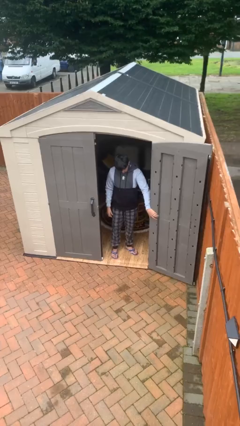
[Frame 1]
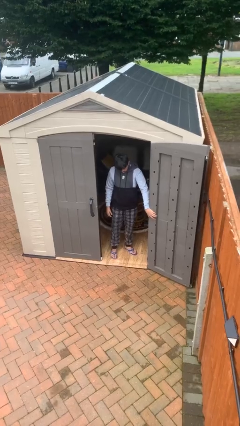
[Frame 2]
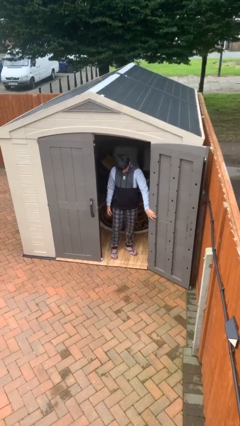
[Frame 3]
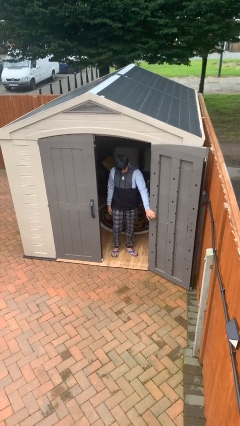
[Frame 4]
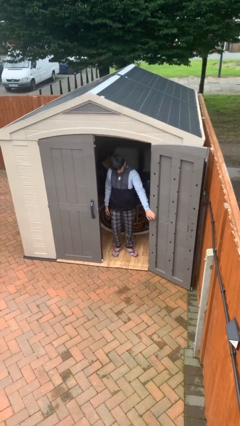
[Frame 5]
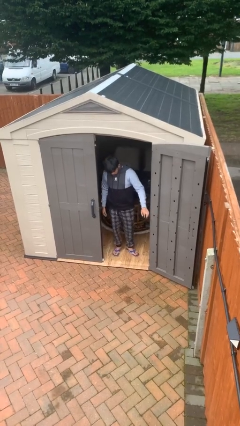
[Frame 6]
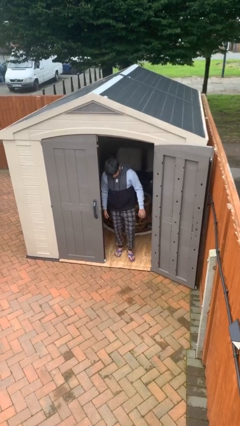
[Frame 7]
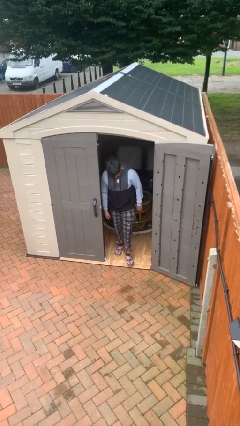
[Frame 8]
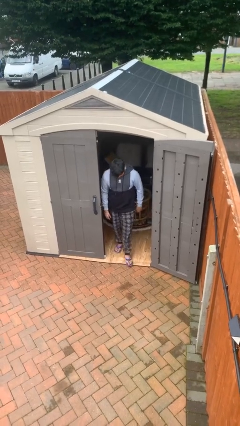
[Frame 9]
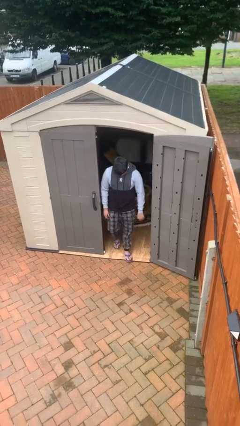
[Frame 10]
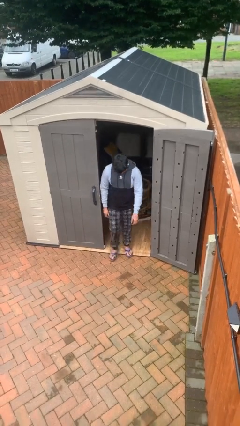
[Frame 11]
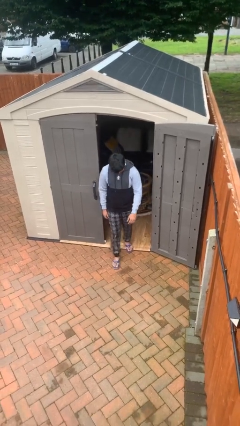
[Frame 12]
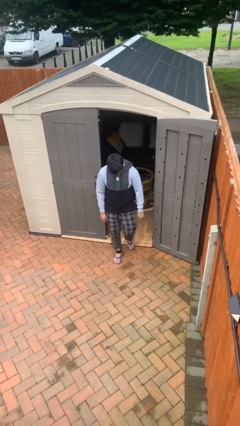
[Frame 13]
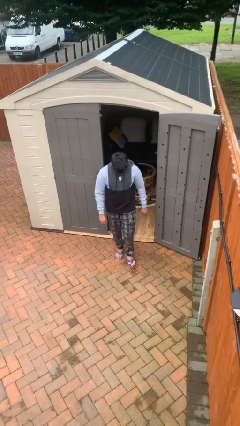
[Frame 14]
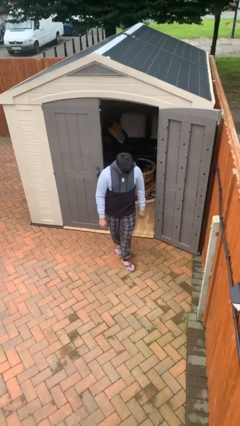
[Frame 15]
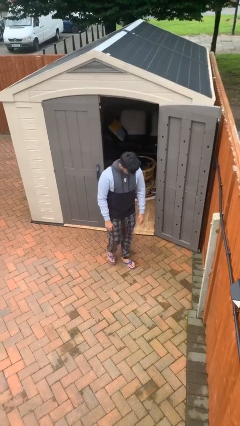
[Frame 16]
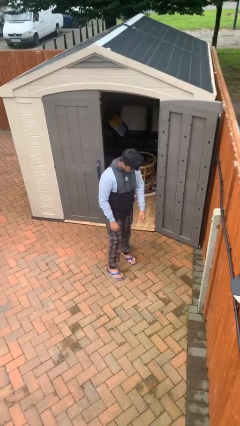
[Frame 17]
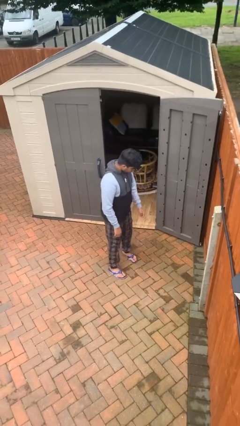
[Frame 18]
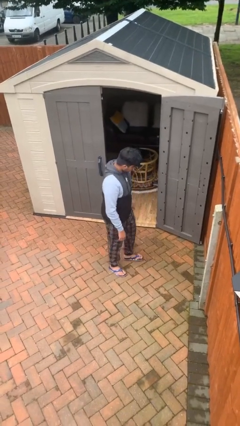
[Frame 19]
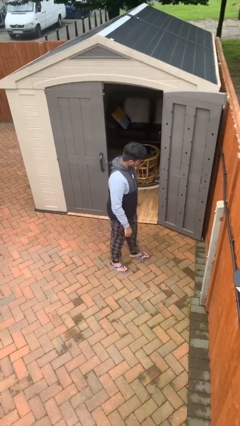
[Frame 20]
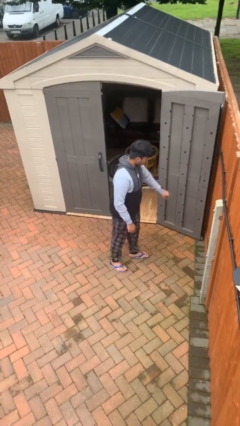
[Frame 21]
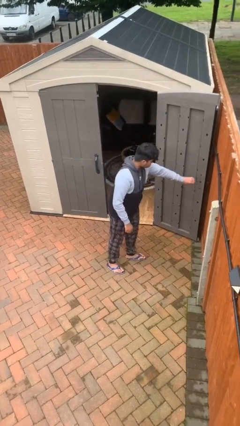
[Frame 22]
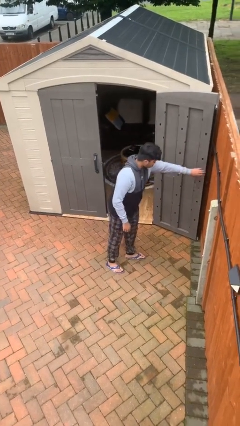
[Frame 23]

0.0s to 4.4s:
person enters scene through structure

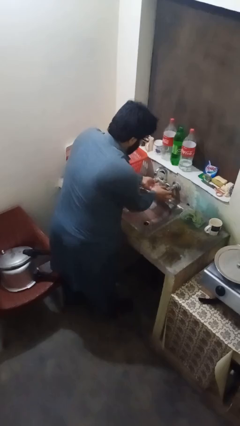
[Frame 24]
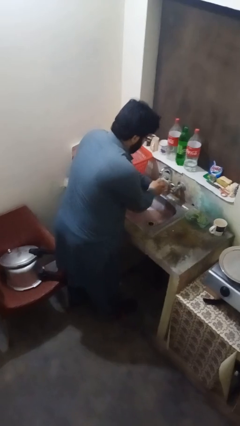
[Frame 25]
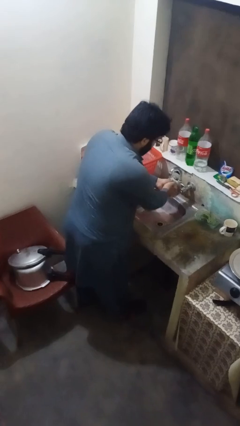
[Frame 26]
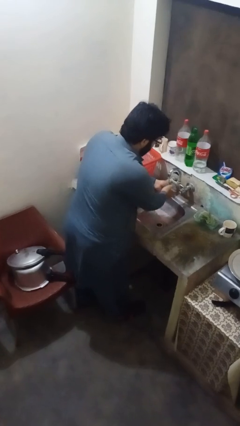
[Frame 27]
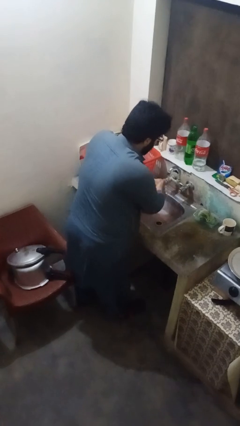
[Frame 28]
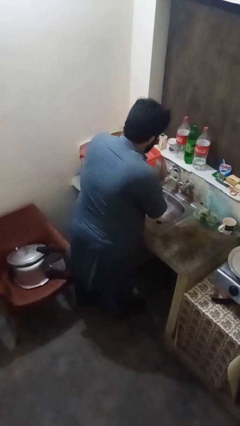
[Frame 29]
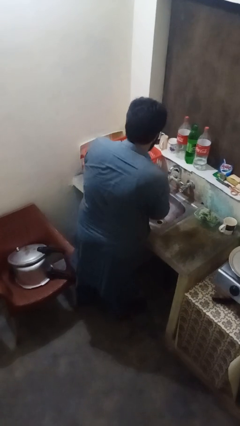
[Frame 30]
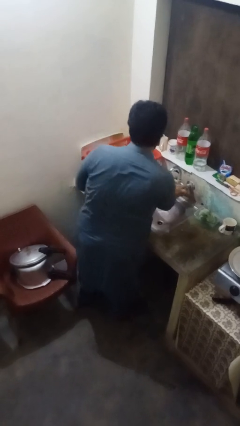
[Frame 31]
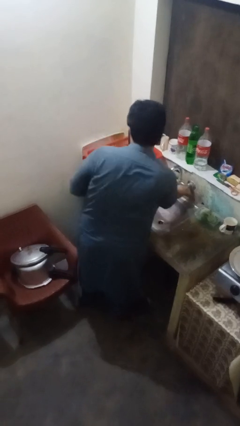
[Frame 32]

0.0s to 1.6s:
person washes hands

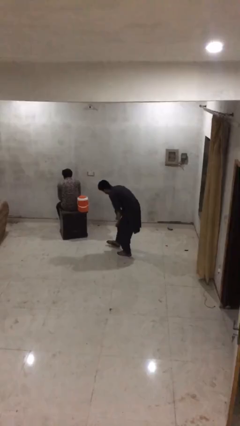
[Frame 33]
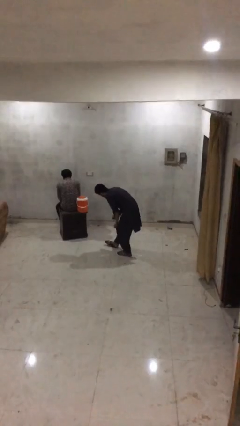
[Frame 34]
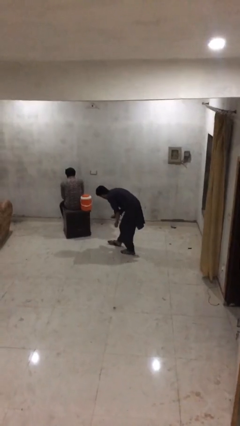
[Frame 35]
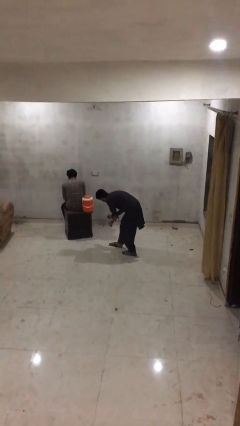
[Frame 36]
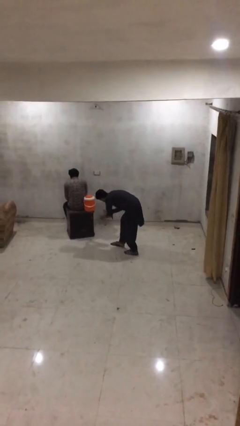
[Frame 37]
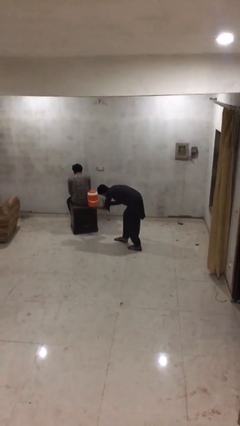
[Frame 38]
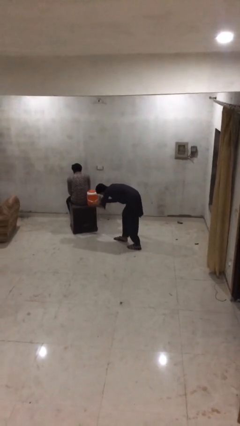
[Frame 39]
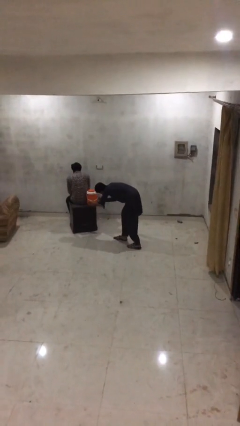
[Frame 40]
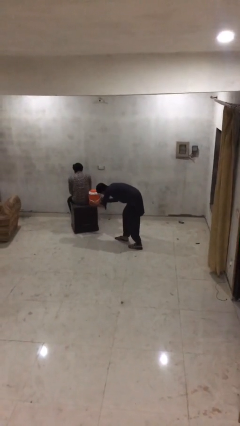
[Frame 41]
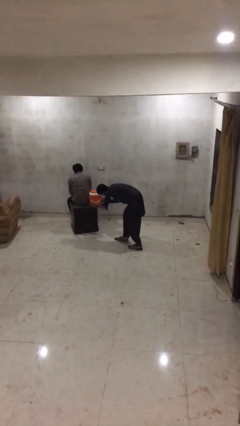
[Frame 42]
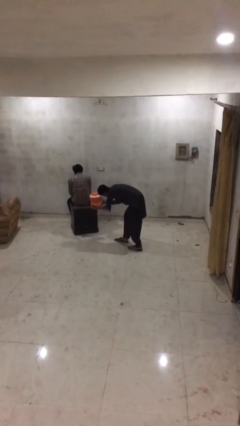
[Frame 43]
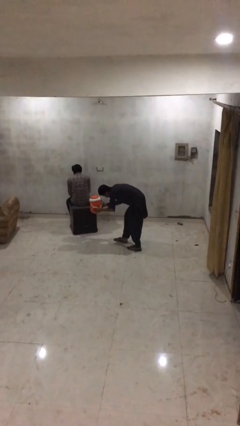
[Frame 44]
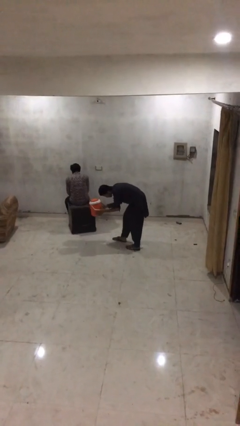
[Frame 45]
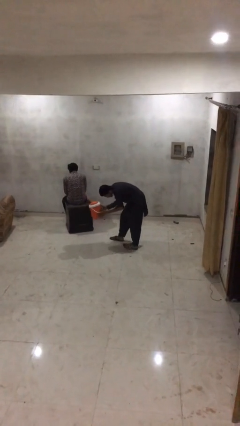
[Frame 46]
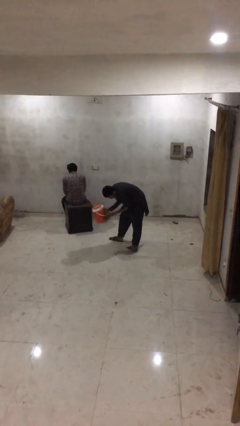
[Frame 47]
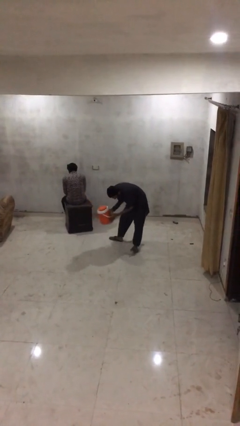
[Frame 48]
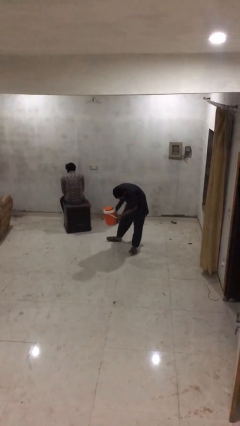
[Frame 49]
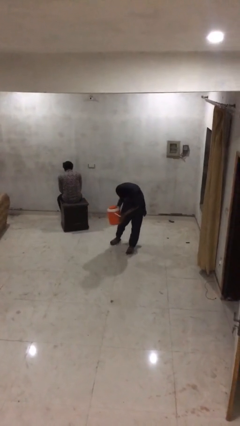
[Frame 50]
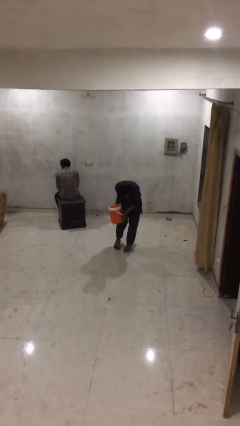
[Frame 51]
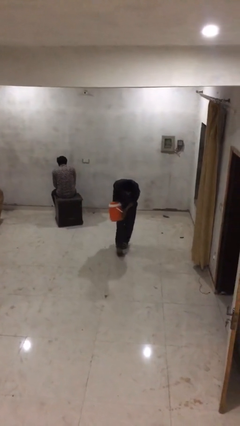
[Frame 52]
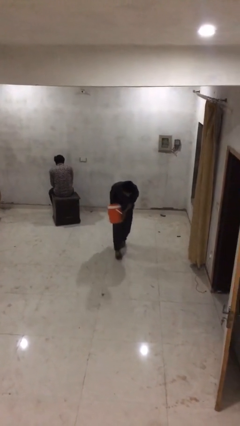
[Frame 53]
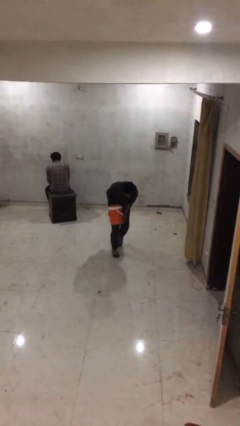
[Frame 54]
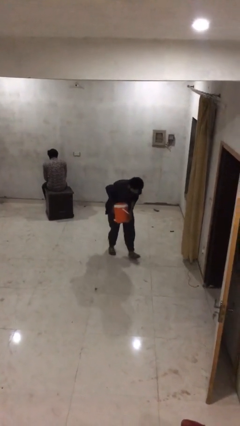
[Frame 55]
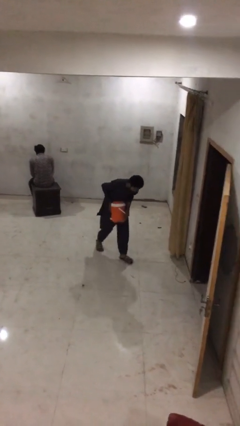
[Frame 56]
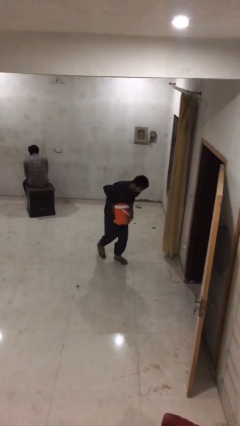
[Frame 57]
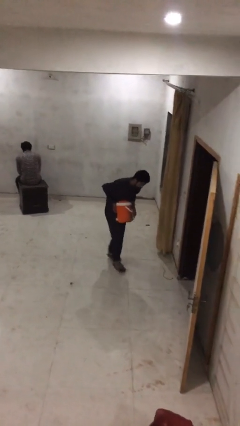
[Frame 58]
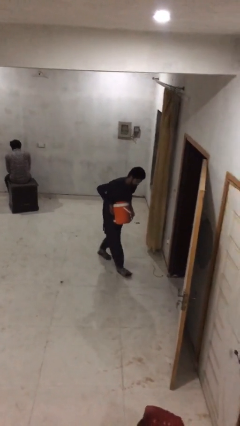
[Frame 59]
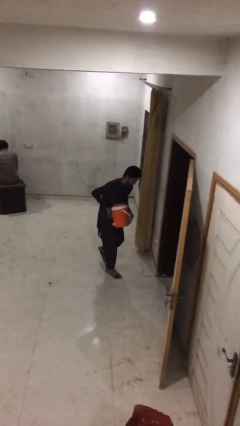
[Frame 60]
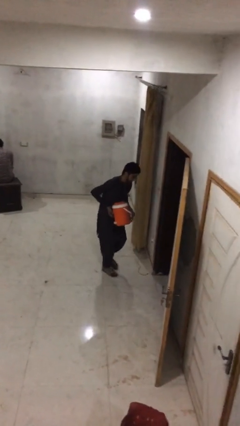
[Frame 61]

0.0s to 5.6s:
person steals object from person

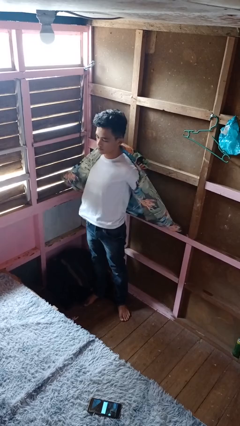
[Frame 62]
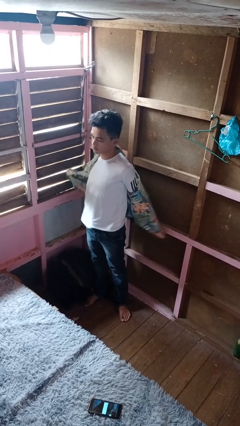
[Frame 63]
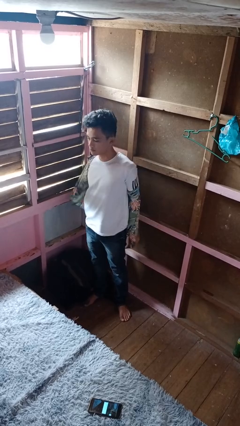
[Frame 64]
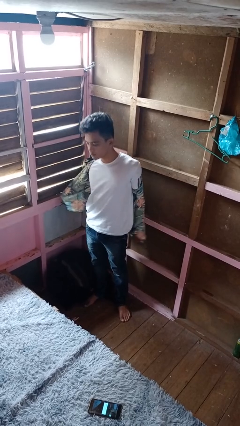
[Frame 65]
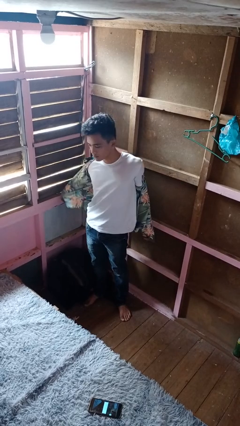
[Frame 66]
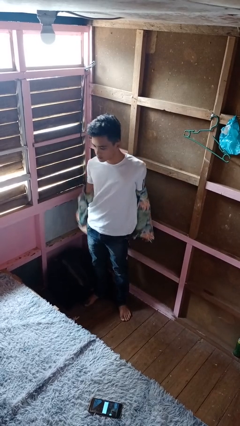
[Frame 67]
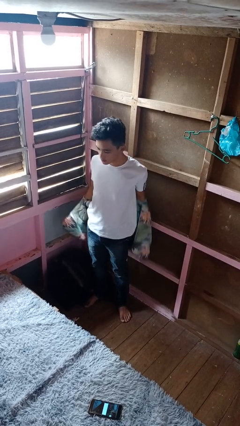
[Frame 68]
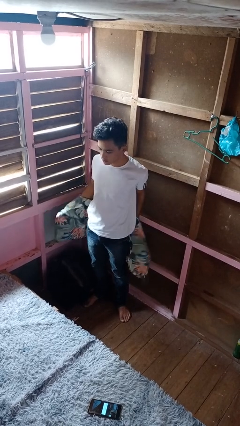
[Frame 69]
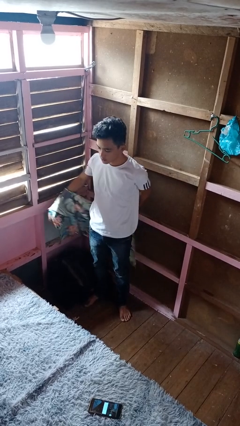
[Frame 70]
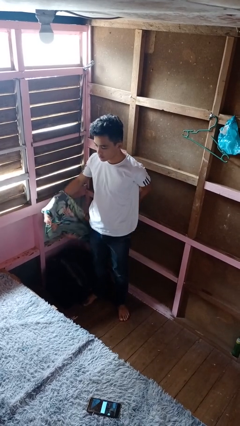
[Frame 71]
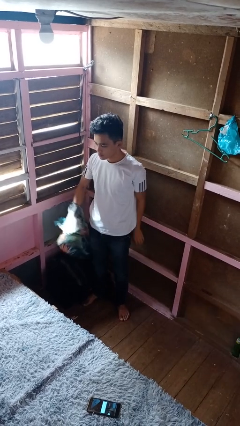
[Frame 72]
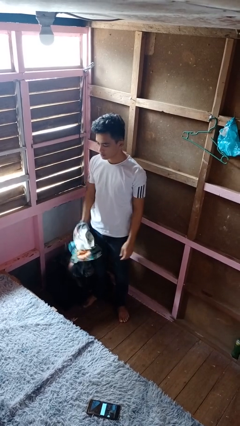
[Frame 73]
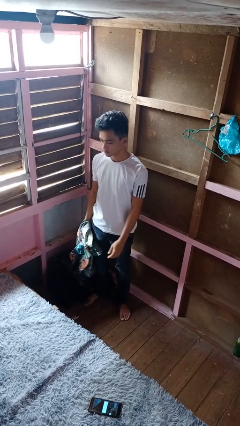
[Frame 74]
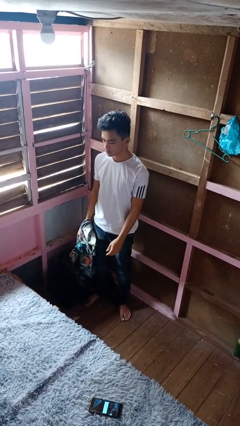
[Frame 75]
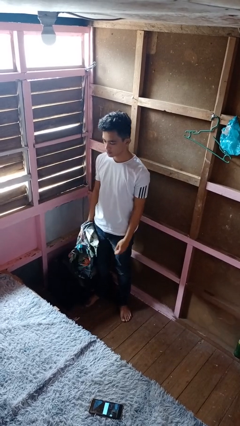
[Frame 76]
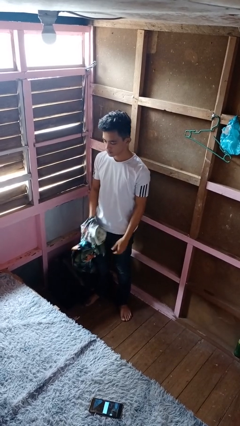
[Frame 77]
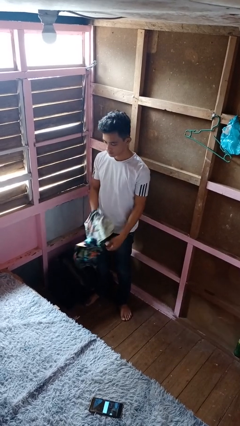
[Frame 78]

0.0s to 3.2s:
person takes off shirt

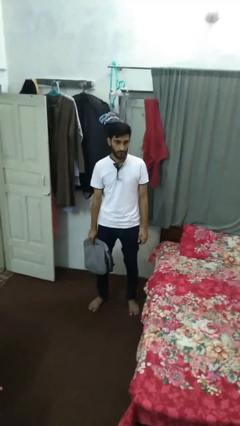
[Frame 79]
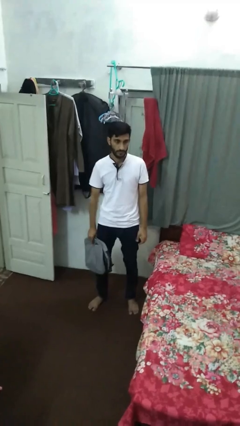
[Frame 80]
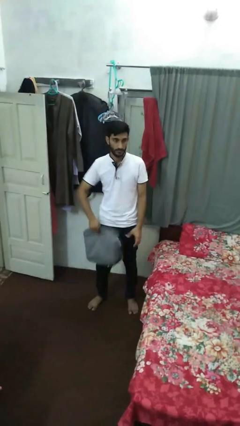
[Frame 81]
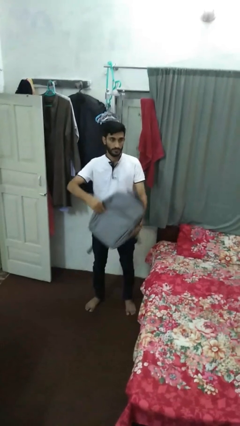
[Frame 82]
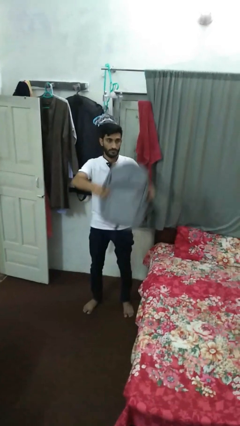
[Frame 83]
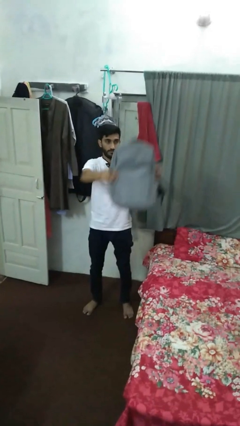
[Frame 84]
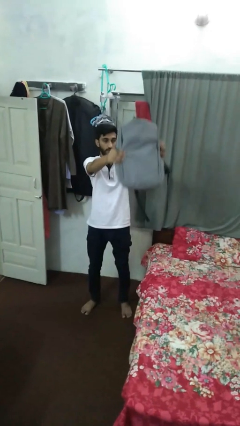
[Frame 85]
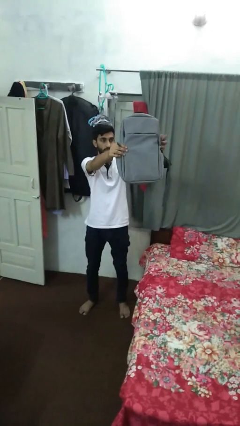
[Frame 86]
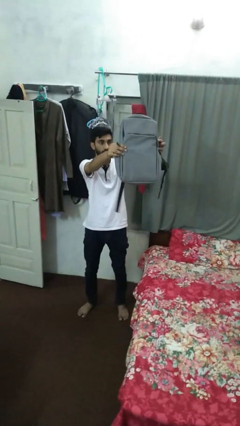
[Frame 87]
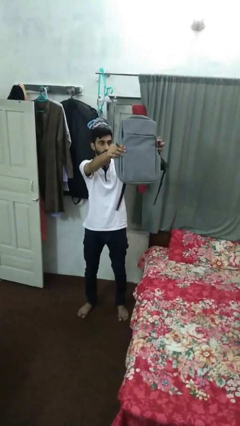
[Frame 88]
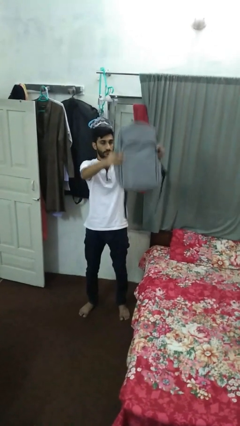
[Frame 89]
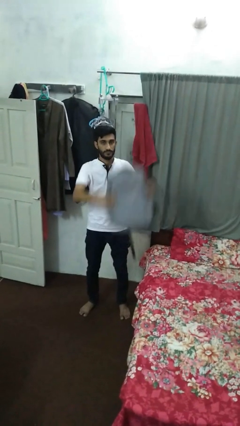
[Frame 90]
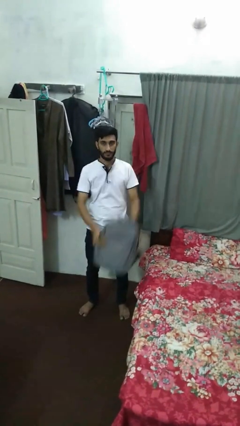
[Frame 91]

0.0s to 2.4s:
person holds object above head

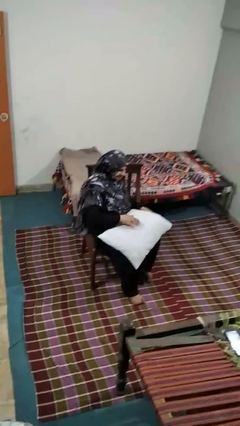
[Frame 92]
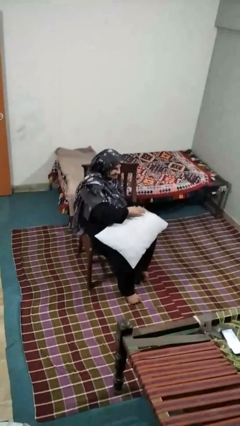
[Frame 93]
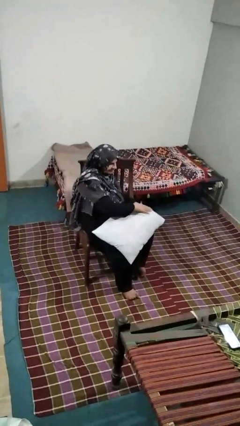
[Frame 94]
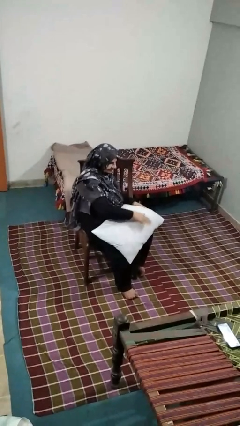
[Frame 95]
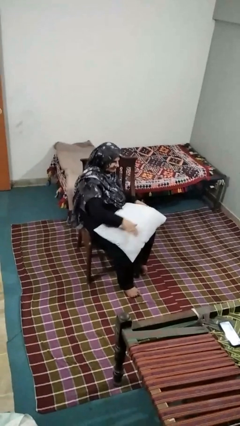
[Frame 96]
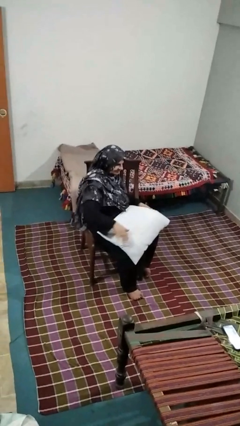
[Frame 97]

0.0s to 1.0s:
person waves hand over object
